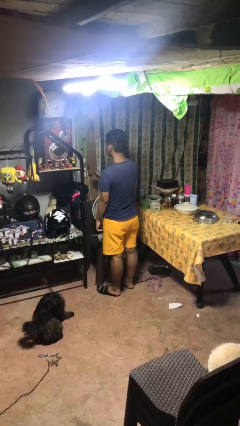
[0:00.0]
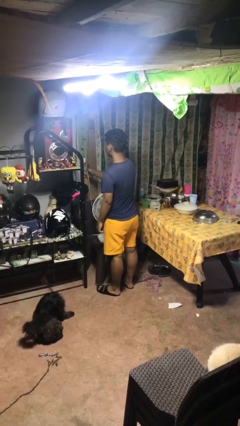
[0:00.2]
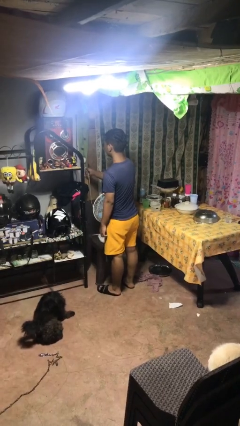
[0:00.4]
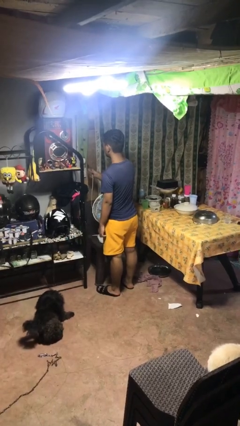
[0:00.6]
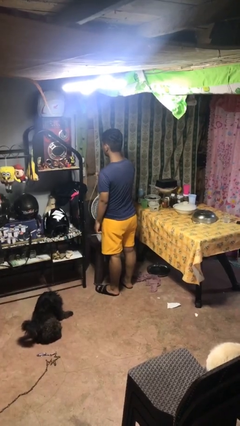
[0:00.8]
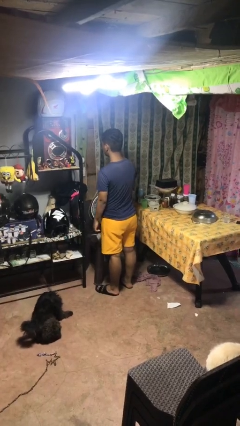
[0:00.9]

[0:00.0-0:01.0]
person unplugs from electrical socket

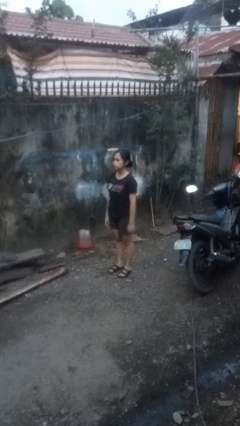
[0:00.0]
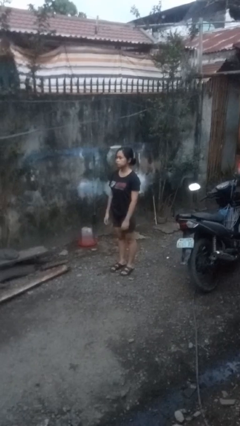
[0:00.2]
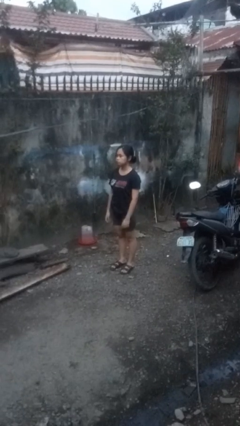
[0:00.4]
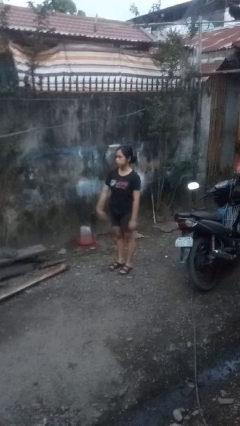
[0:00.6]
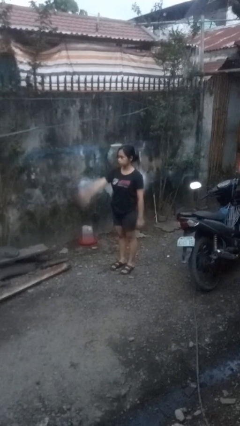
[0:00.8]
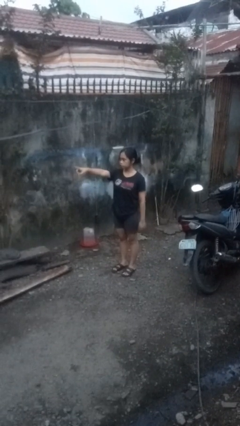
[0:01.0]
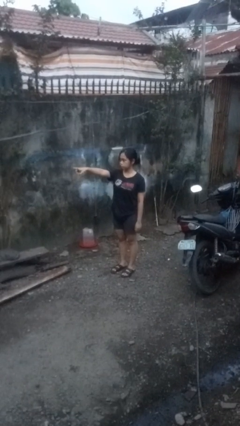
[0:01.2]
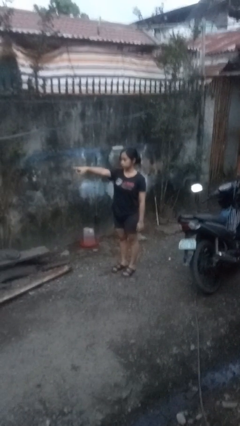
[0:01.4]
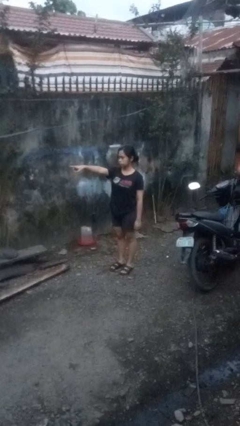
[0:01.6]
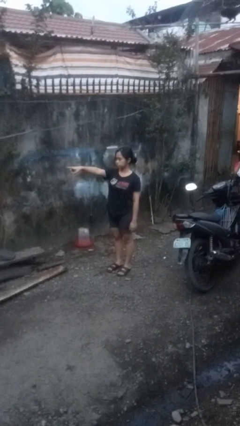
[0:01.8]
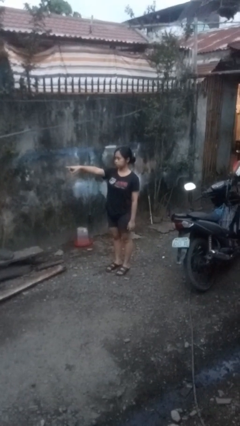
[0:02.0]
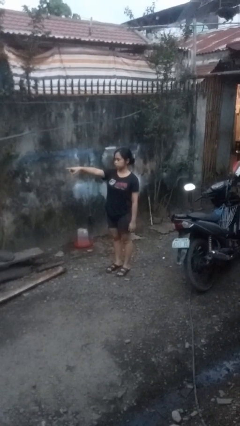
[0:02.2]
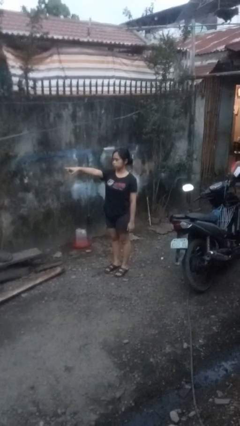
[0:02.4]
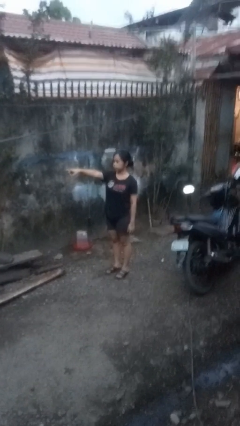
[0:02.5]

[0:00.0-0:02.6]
person points at person

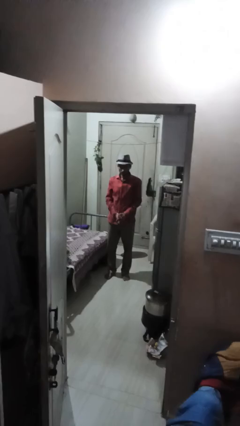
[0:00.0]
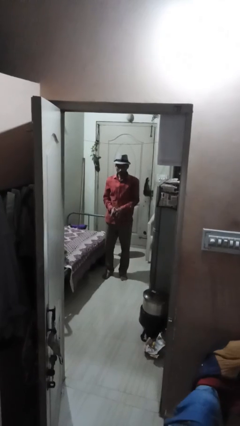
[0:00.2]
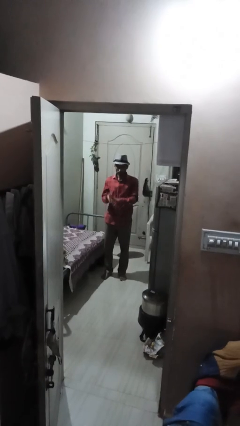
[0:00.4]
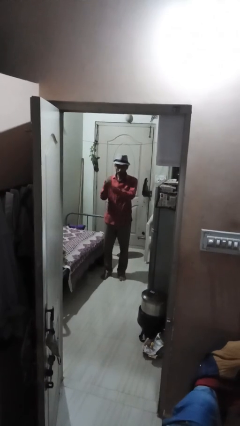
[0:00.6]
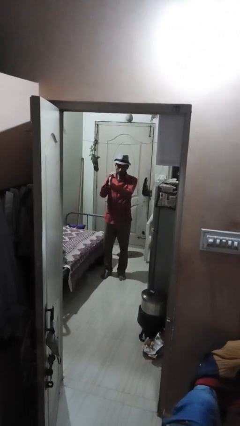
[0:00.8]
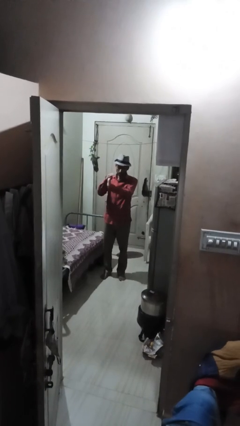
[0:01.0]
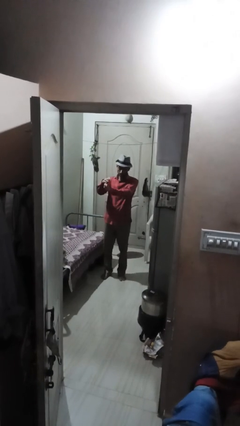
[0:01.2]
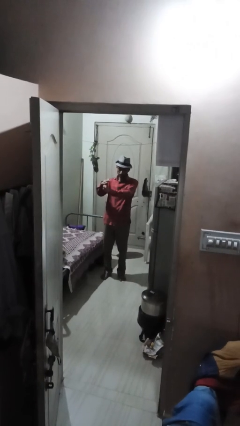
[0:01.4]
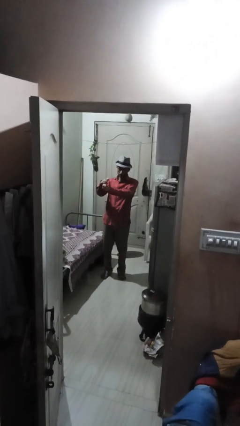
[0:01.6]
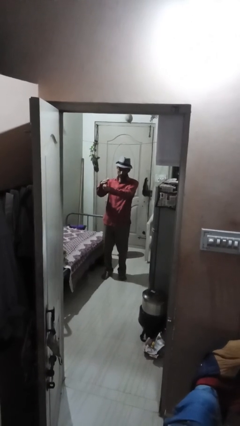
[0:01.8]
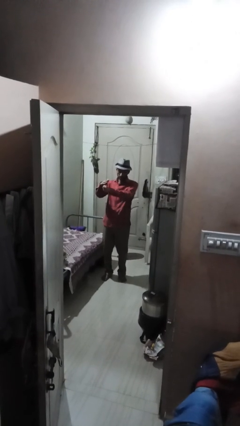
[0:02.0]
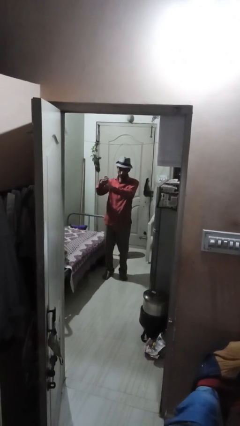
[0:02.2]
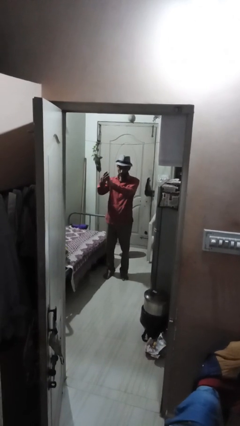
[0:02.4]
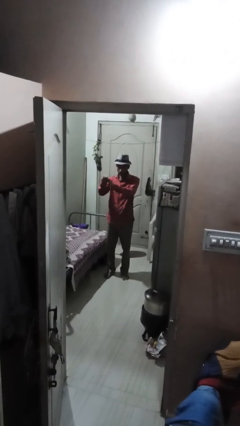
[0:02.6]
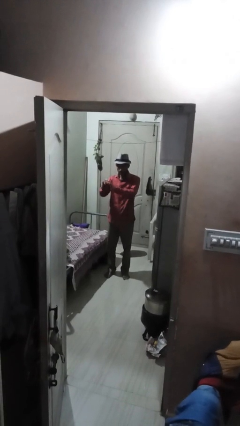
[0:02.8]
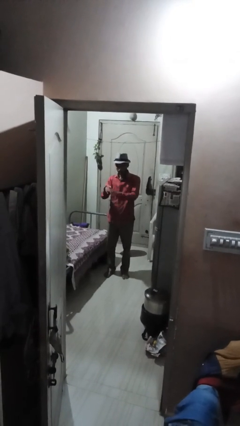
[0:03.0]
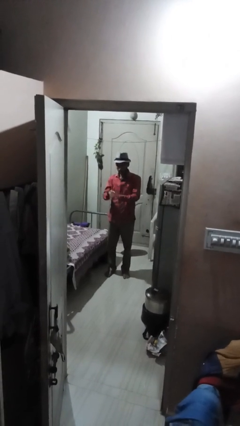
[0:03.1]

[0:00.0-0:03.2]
person cracks knuckles

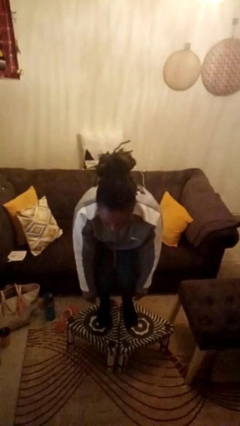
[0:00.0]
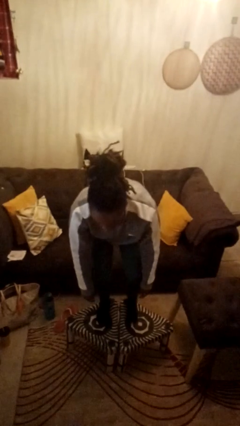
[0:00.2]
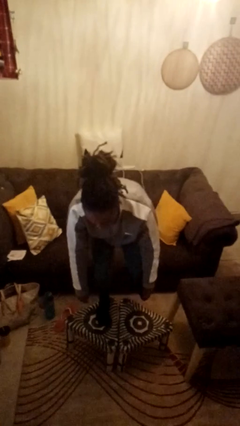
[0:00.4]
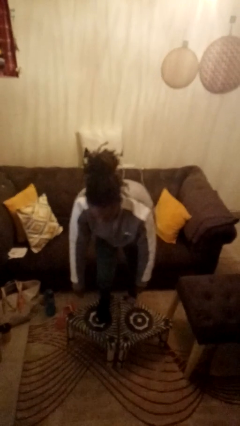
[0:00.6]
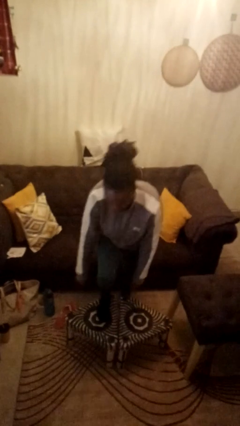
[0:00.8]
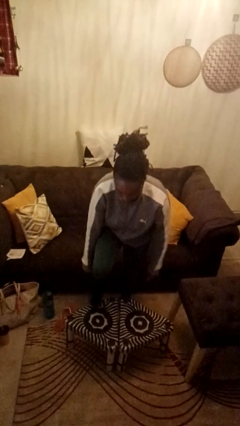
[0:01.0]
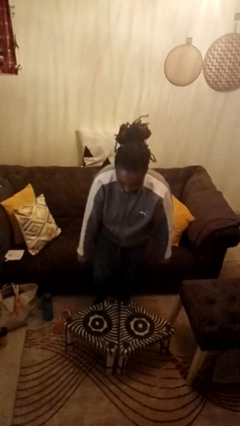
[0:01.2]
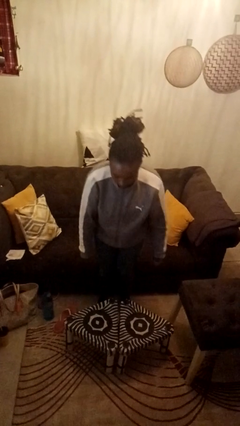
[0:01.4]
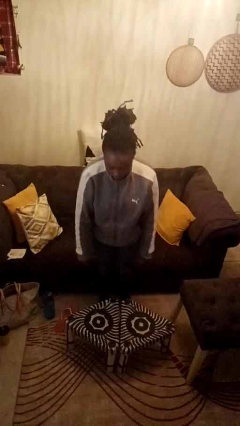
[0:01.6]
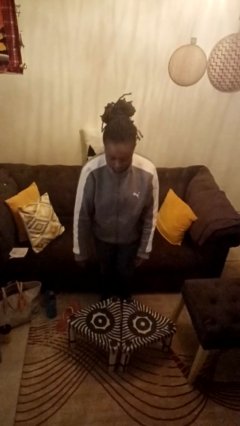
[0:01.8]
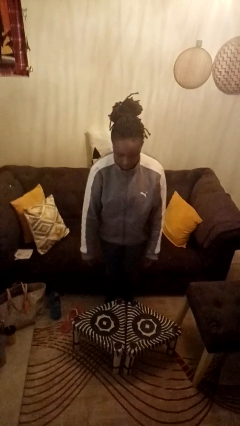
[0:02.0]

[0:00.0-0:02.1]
person climbs off table

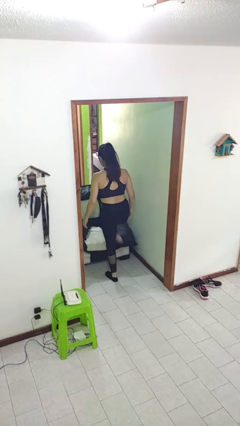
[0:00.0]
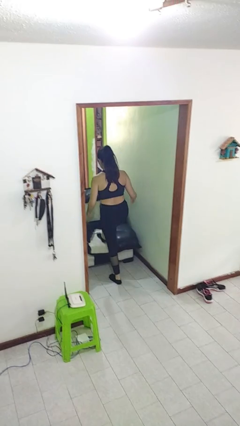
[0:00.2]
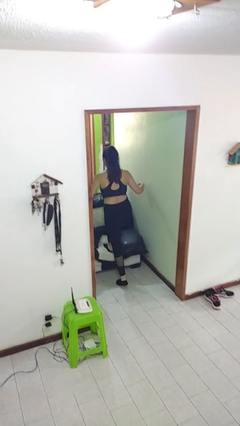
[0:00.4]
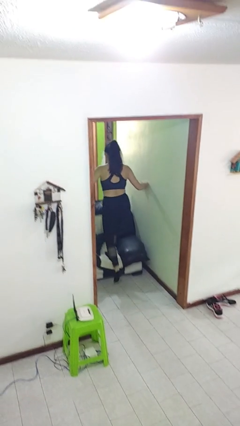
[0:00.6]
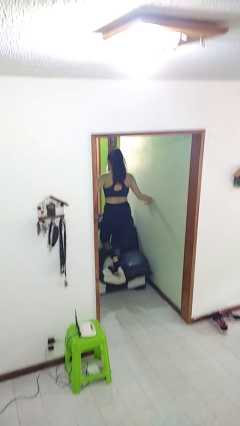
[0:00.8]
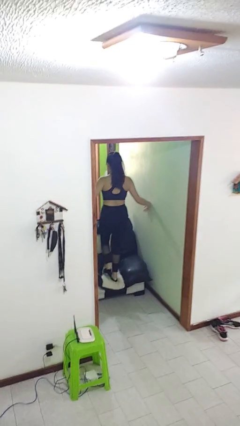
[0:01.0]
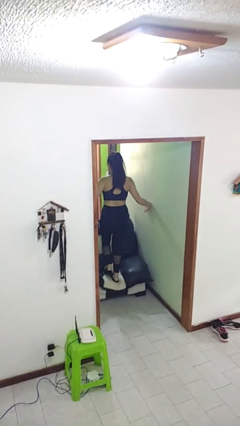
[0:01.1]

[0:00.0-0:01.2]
person climbs on couch

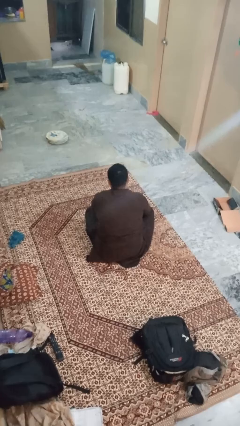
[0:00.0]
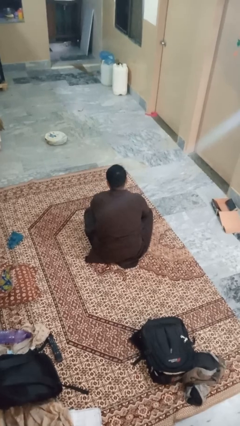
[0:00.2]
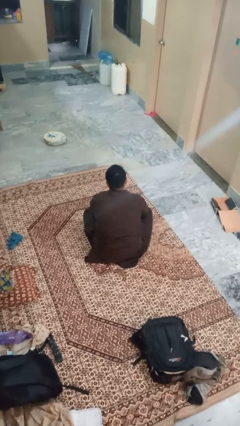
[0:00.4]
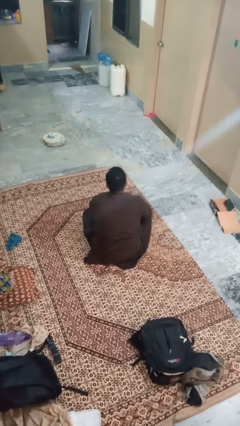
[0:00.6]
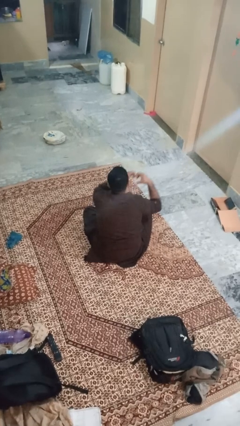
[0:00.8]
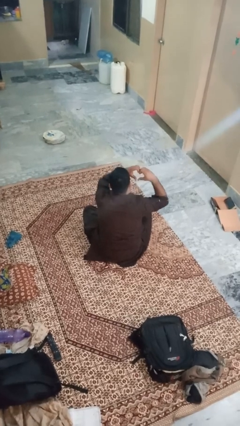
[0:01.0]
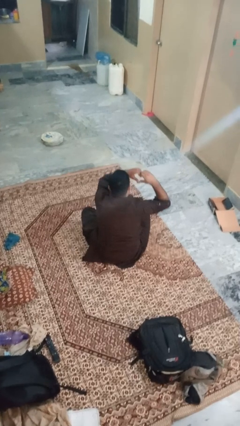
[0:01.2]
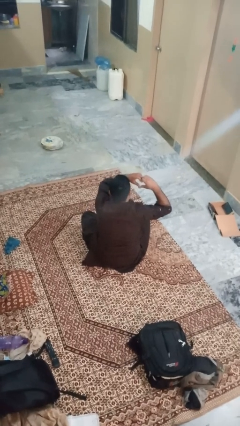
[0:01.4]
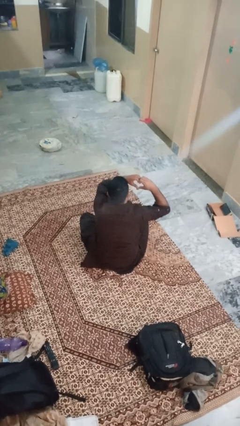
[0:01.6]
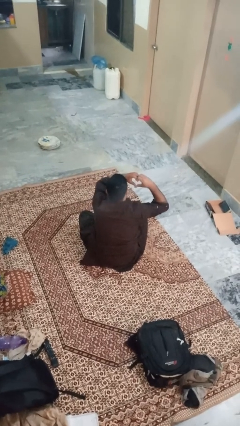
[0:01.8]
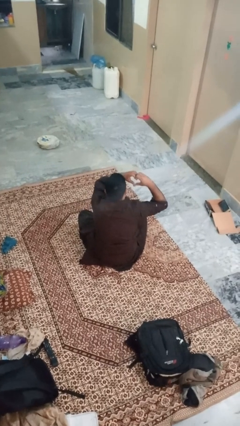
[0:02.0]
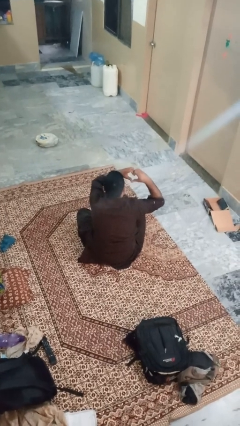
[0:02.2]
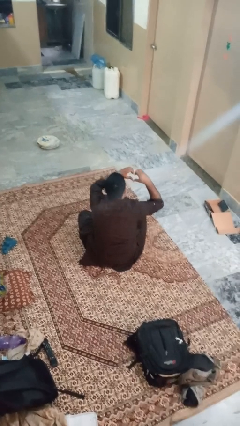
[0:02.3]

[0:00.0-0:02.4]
person gestures heart

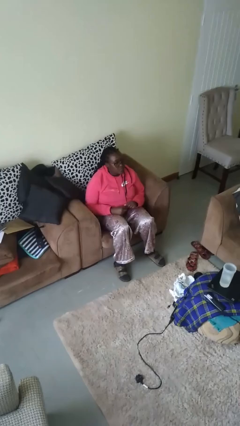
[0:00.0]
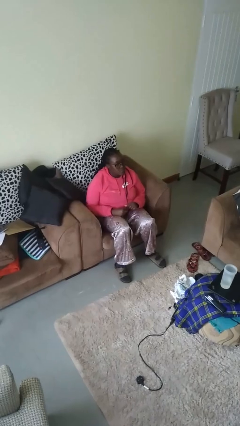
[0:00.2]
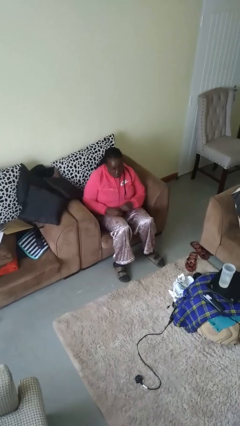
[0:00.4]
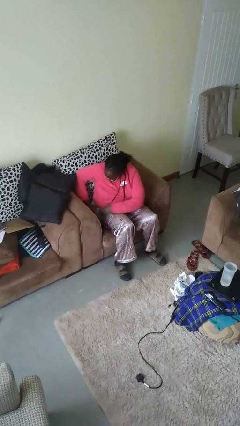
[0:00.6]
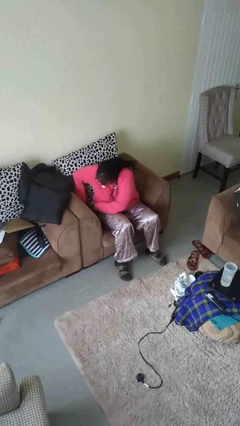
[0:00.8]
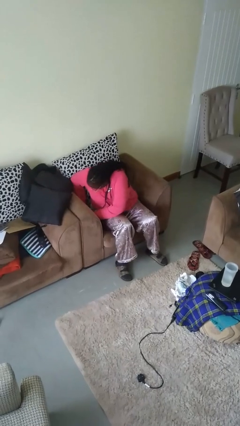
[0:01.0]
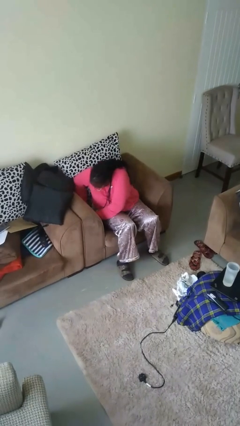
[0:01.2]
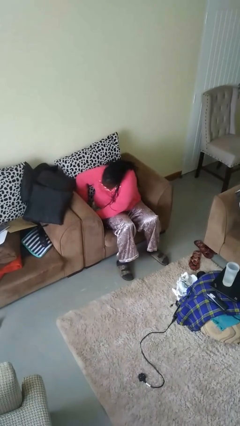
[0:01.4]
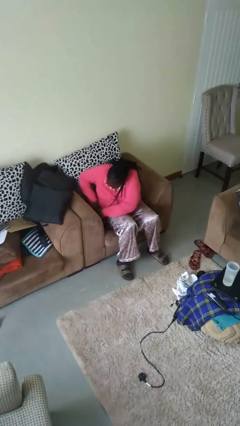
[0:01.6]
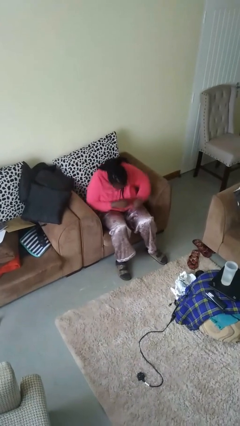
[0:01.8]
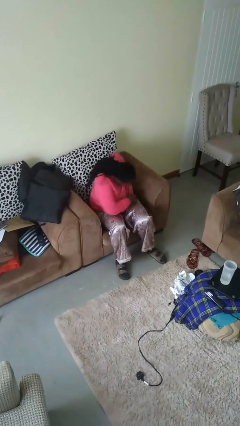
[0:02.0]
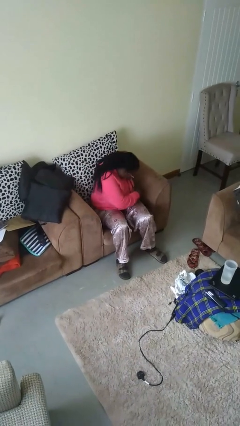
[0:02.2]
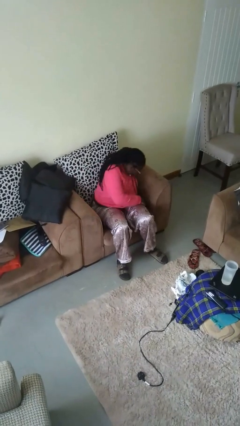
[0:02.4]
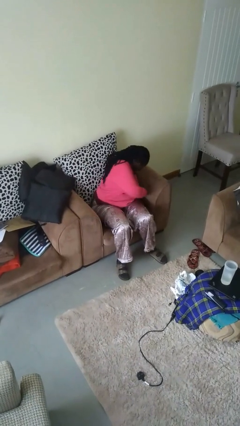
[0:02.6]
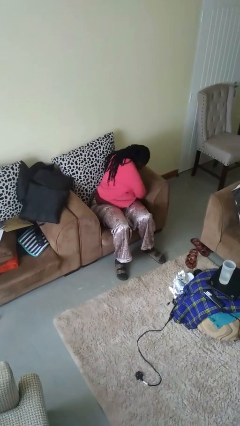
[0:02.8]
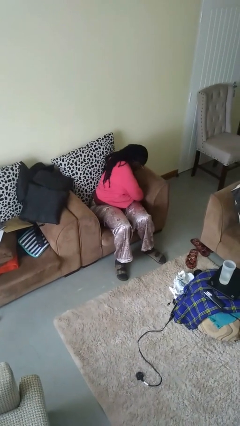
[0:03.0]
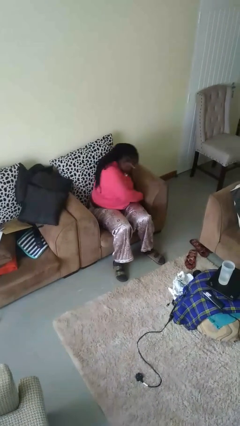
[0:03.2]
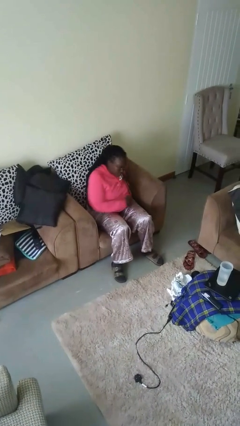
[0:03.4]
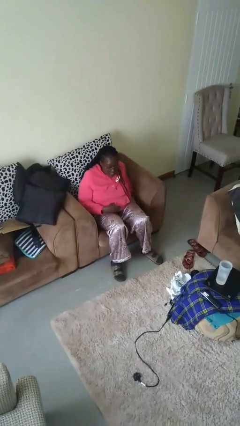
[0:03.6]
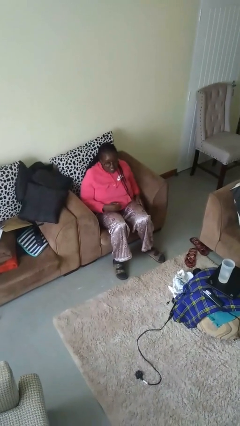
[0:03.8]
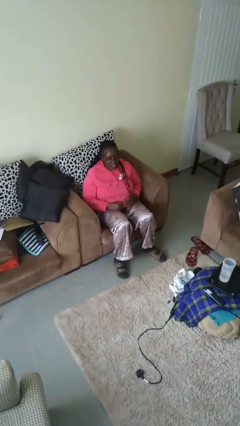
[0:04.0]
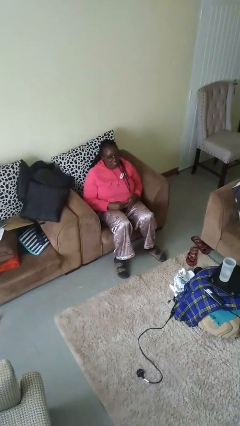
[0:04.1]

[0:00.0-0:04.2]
person searches in couch
